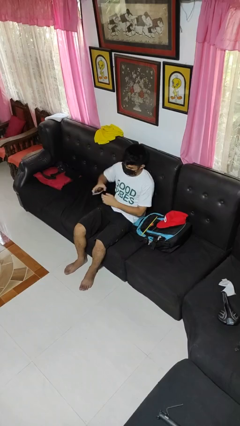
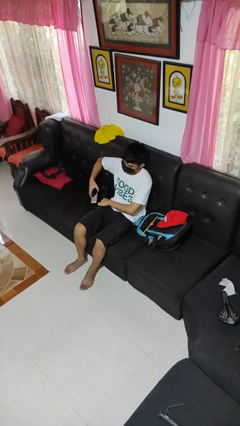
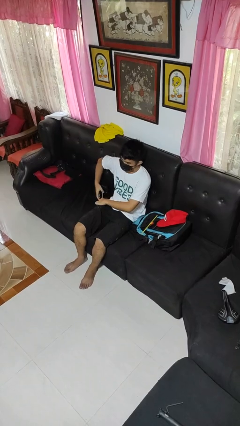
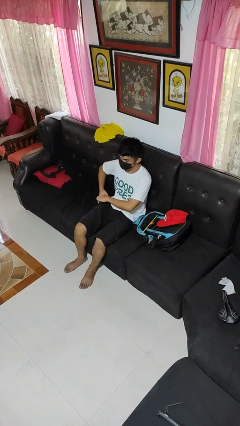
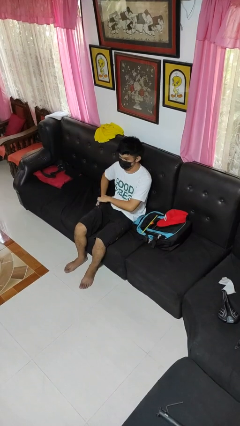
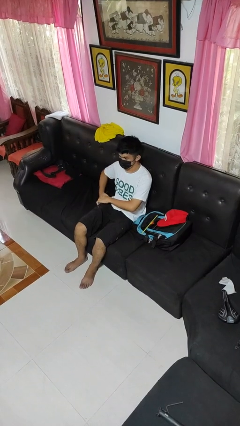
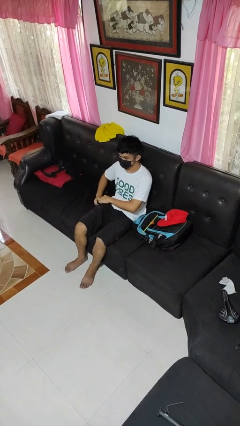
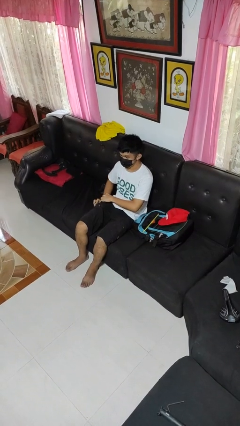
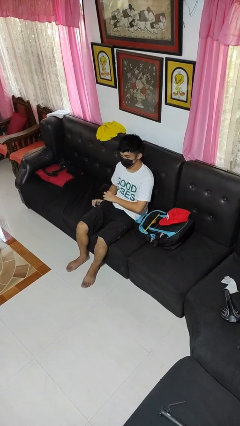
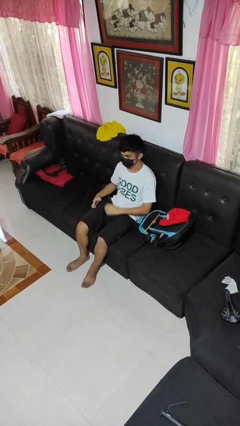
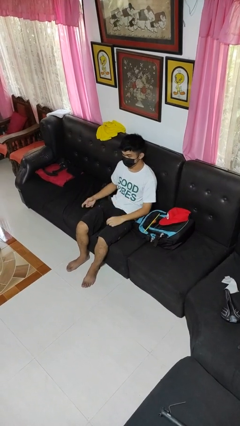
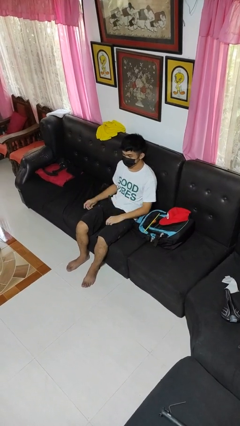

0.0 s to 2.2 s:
person puts phone into pocket

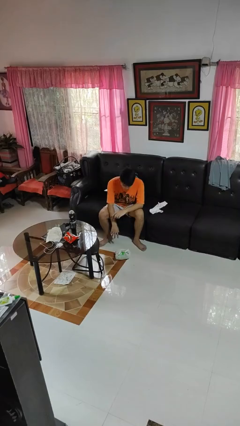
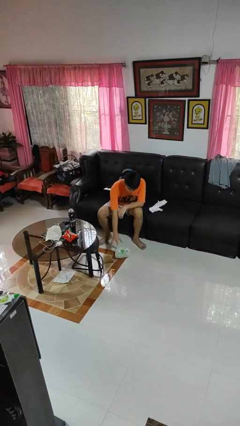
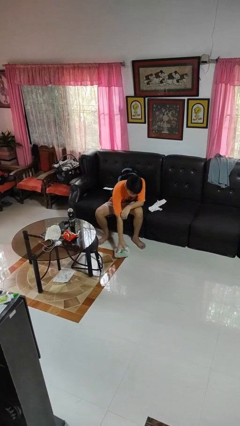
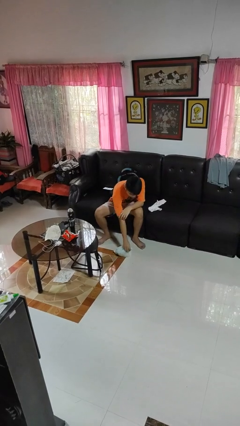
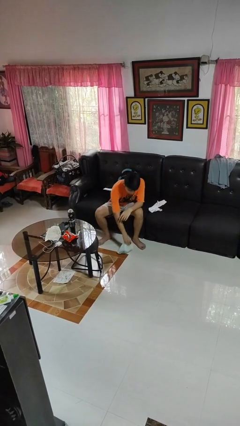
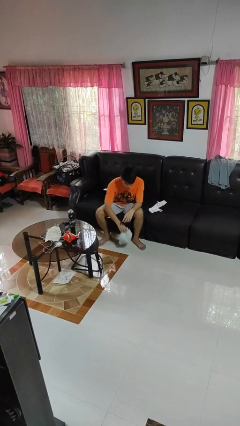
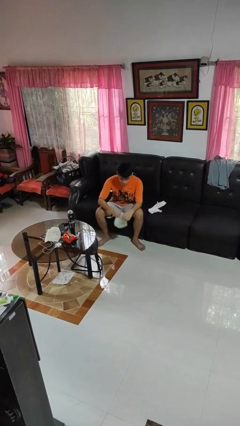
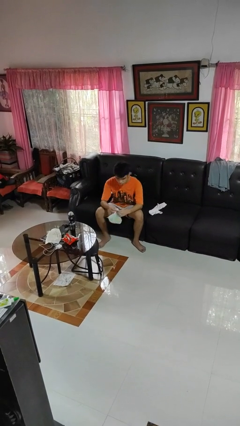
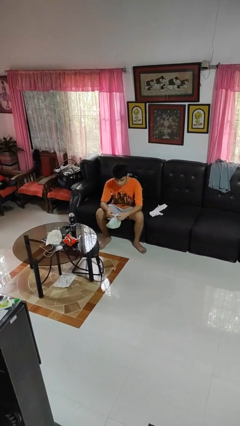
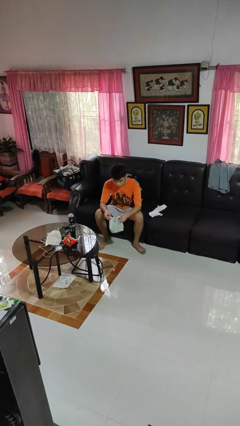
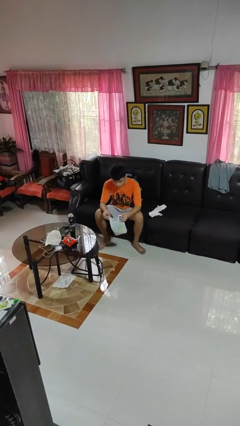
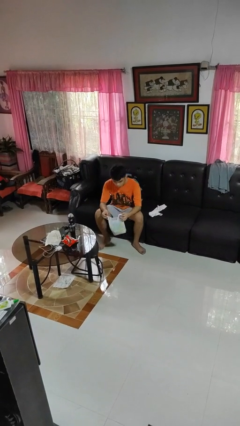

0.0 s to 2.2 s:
person picks up object from floor

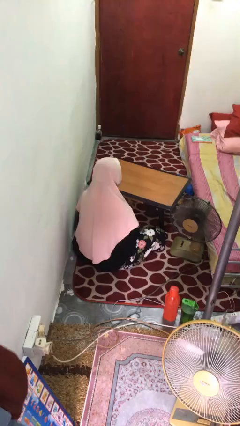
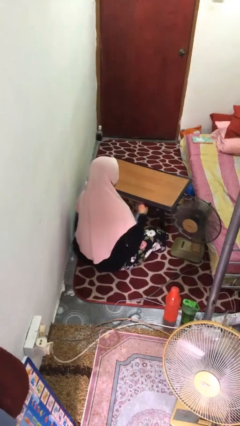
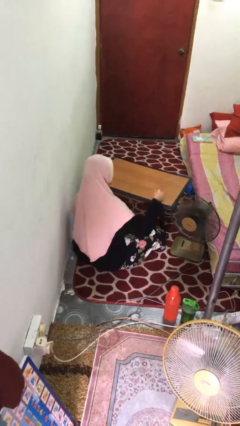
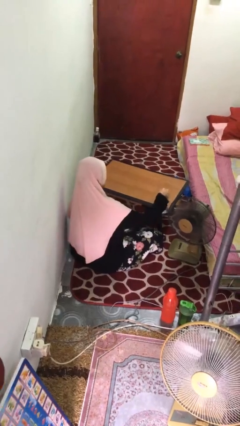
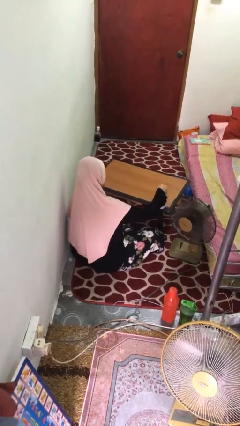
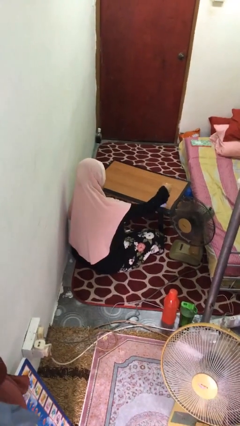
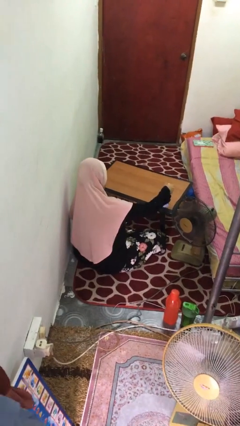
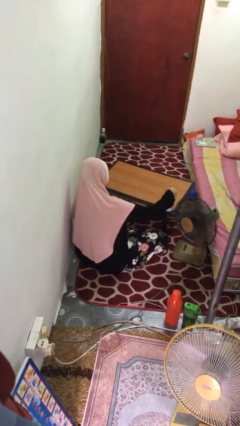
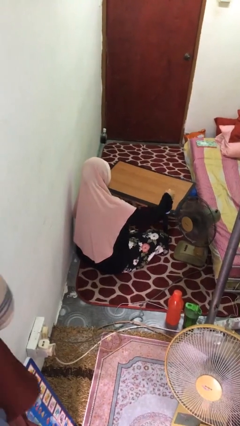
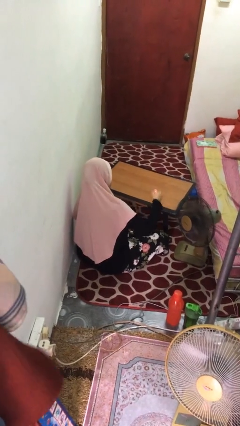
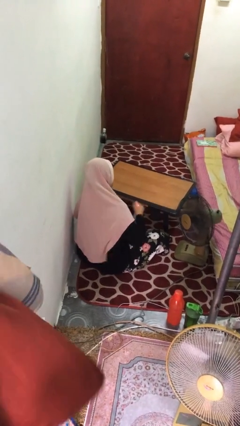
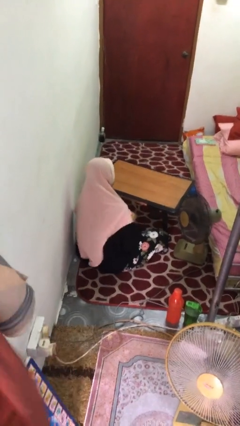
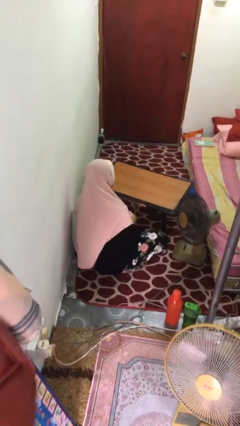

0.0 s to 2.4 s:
person sprays from bottle

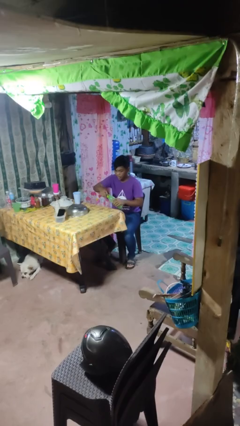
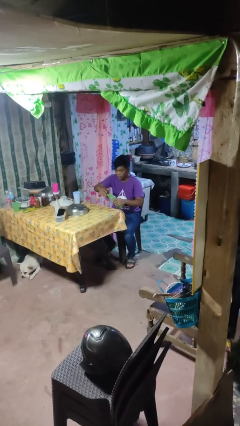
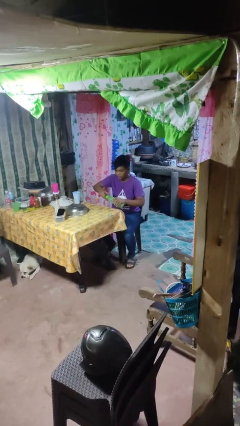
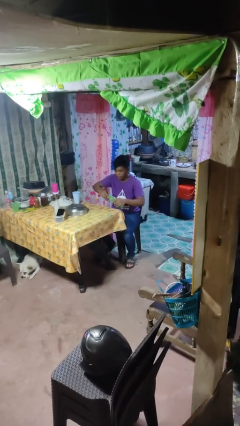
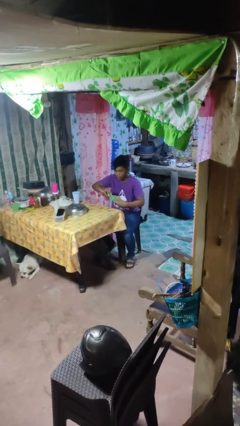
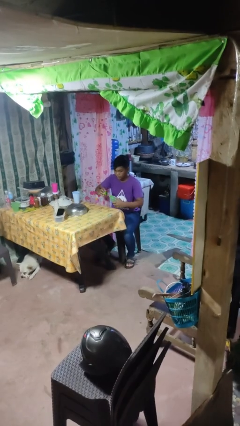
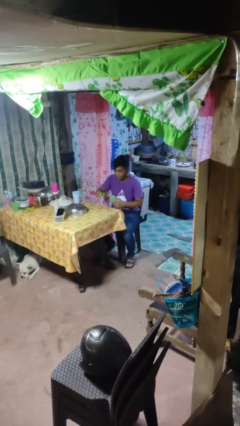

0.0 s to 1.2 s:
person unscrews lid from bottle

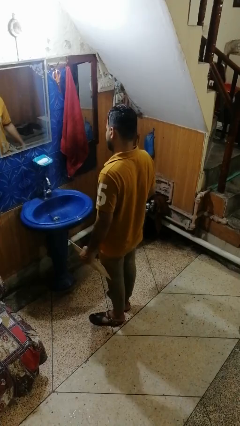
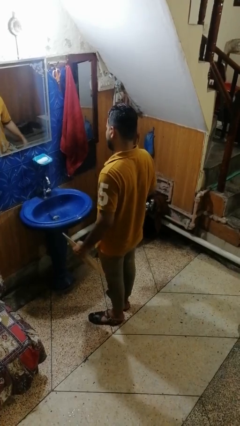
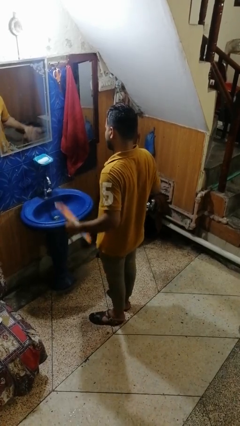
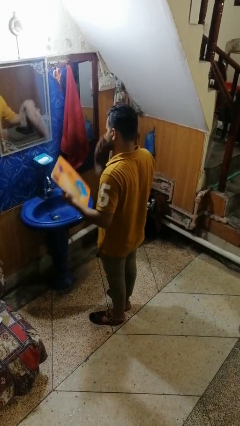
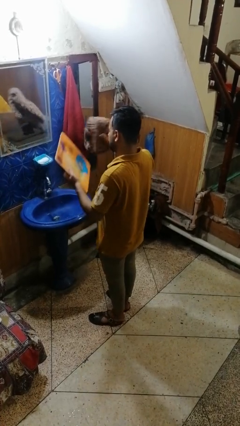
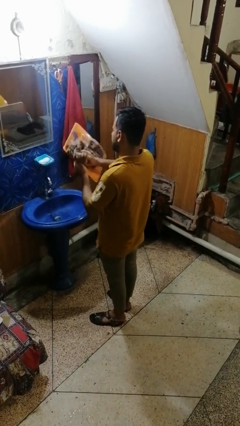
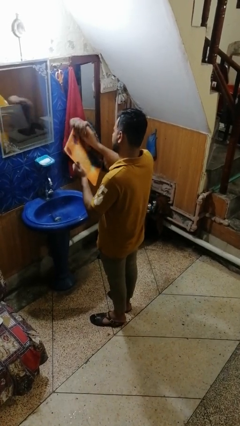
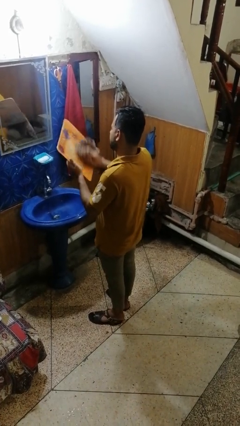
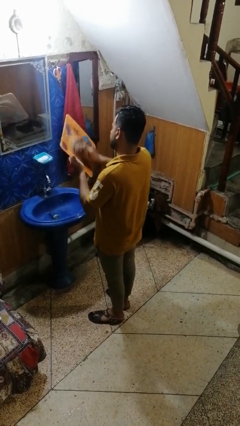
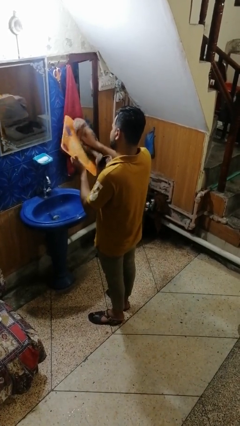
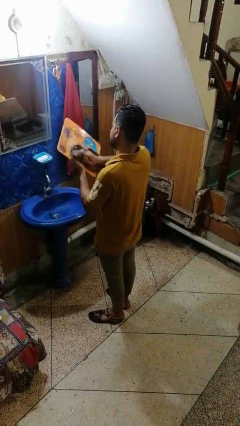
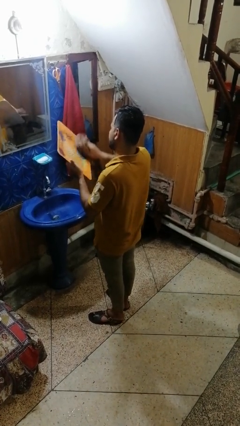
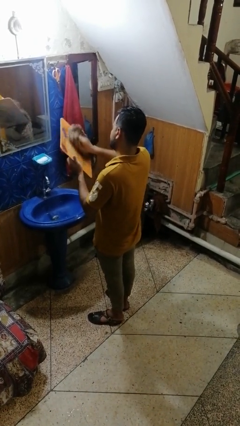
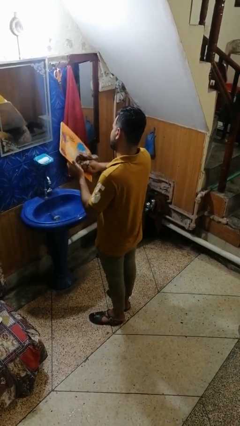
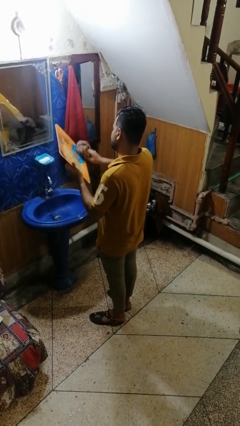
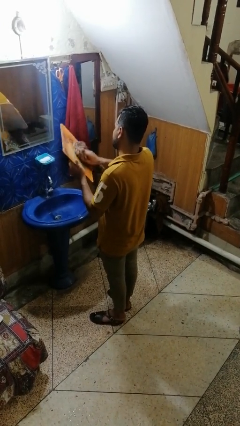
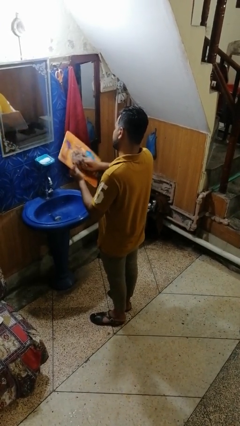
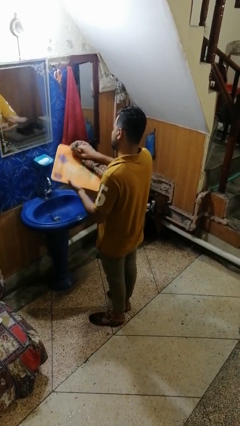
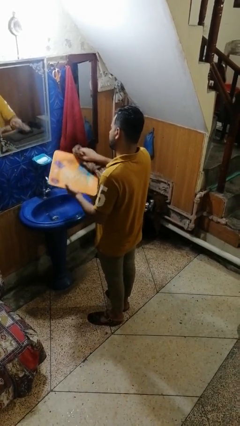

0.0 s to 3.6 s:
person dries dish

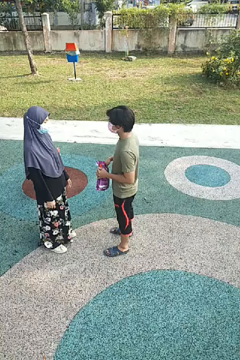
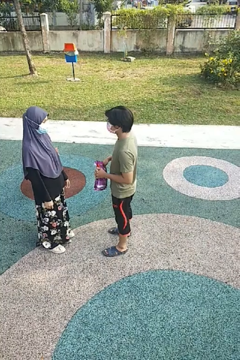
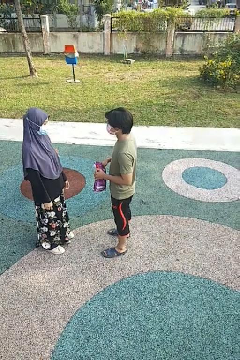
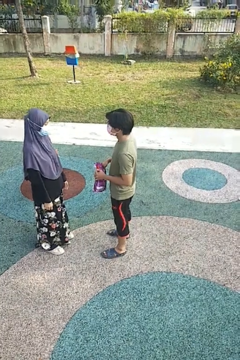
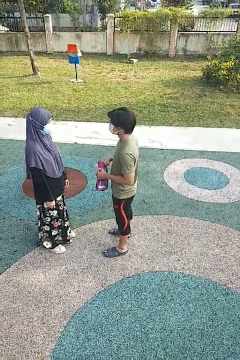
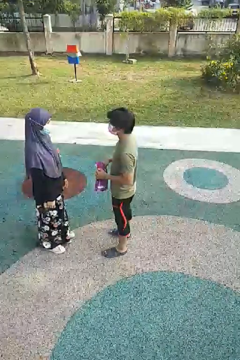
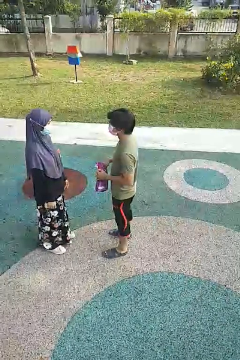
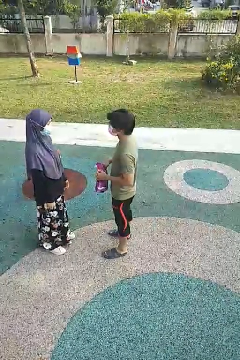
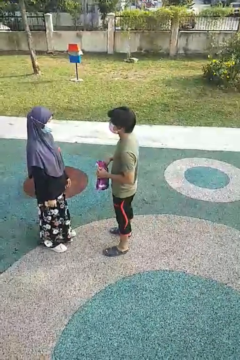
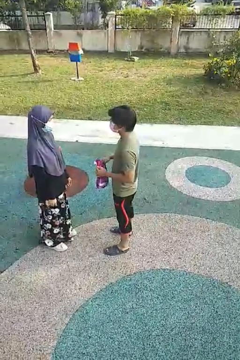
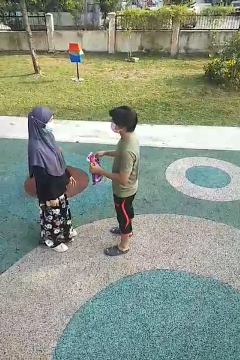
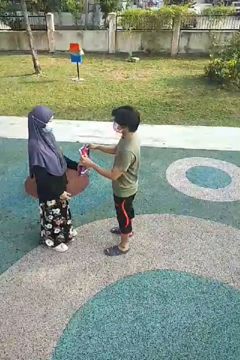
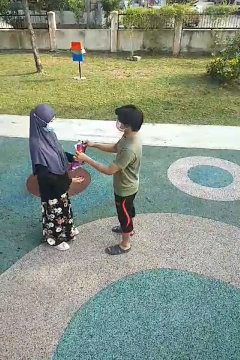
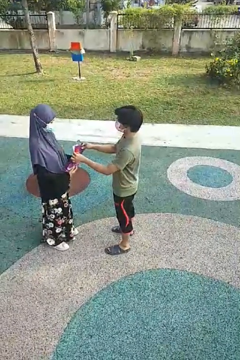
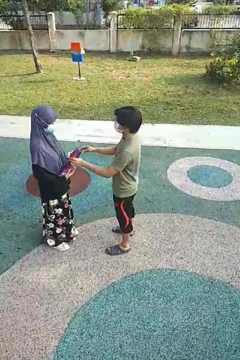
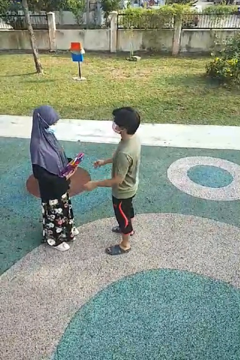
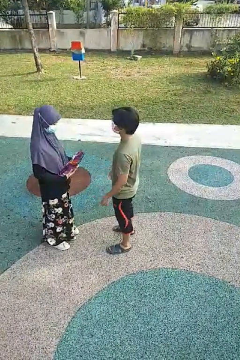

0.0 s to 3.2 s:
person transfers object to person

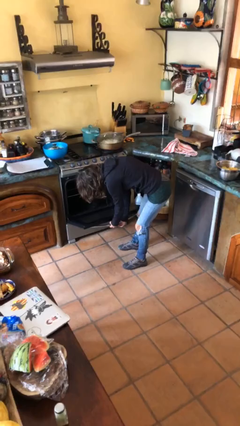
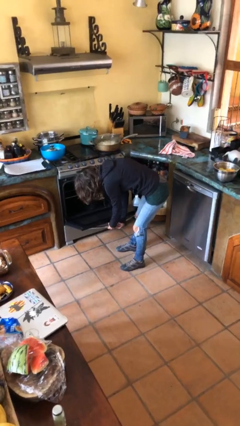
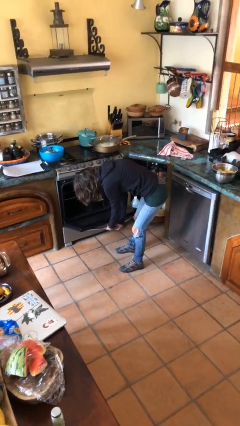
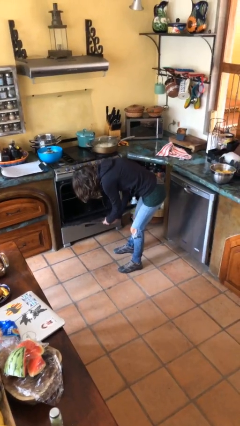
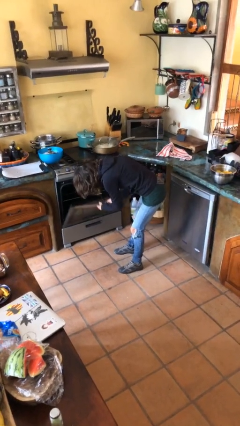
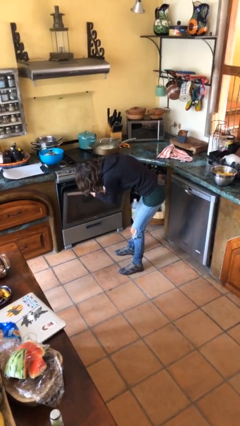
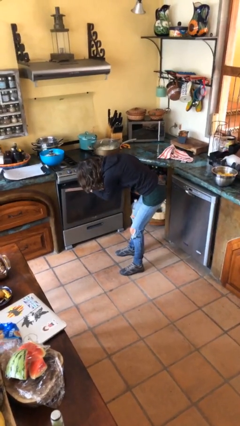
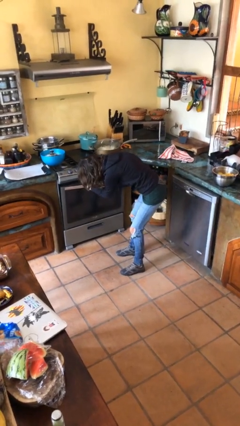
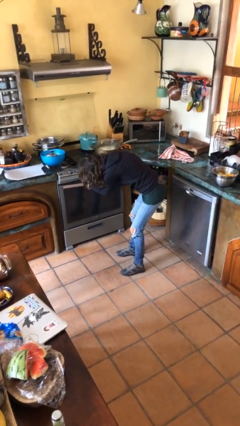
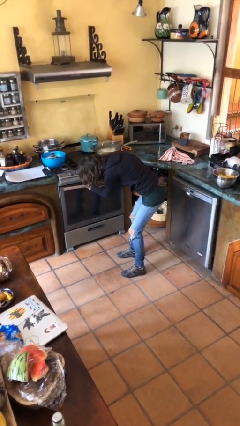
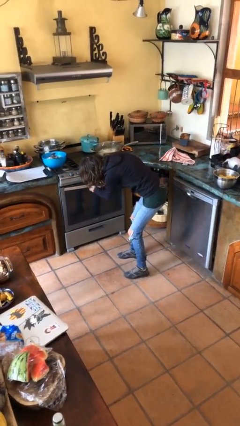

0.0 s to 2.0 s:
person closes oven door

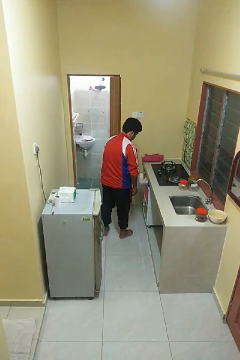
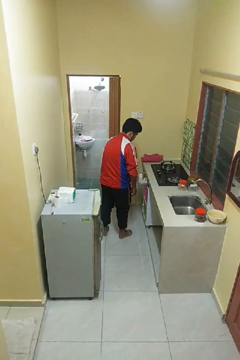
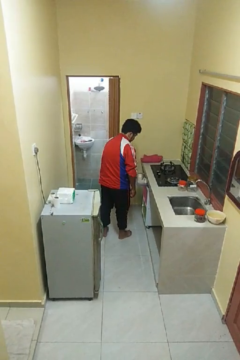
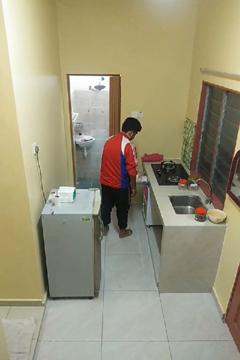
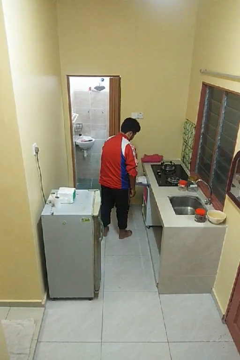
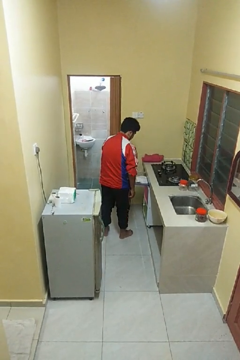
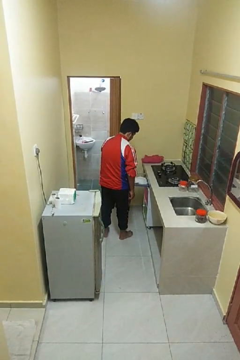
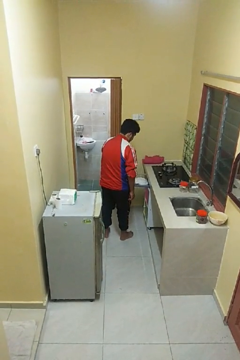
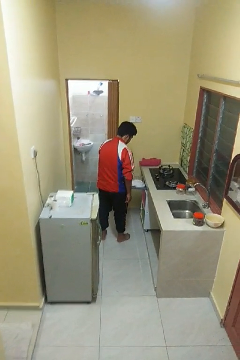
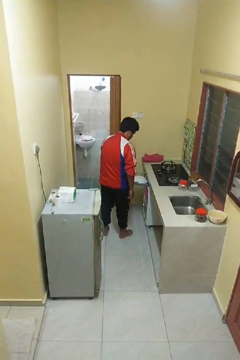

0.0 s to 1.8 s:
person opens kitchen drawer
